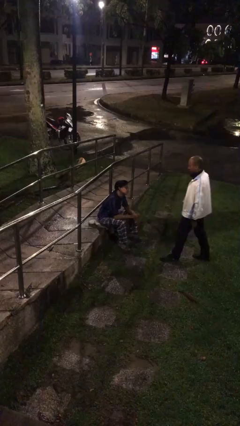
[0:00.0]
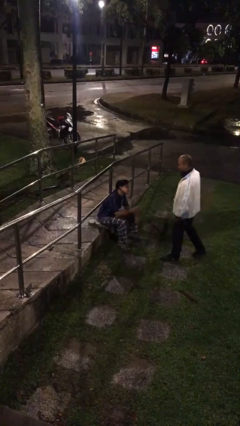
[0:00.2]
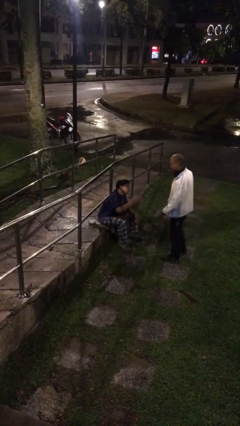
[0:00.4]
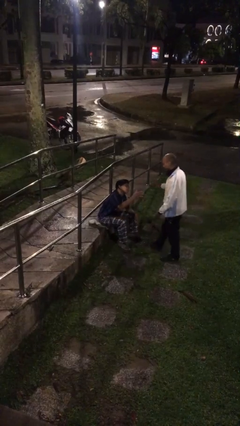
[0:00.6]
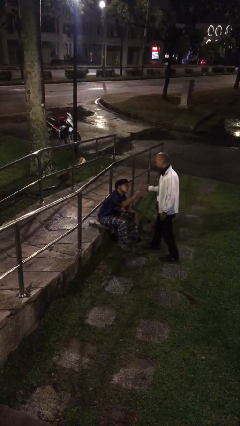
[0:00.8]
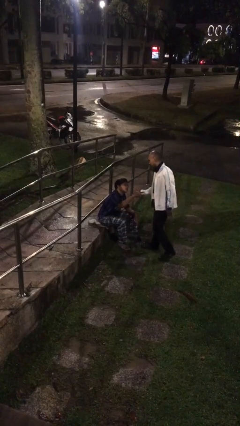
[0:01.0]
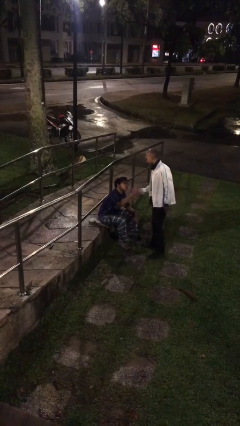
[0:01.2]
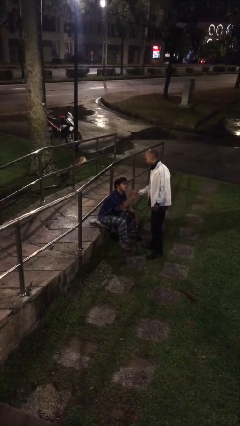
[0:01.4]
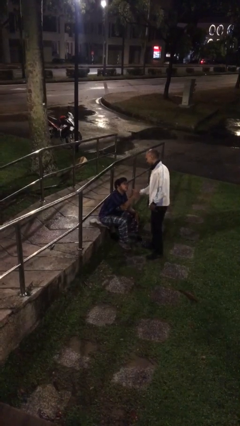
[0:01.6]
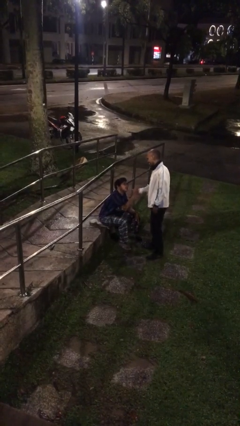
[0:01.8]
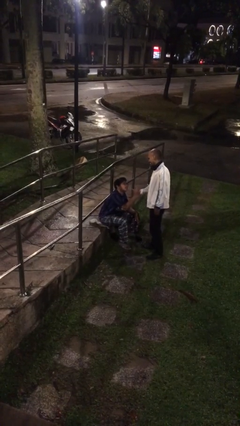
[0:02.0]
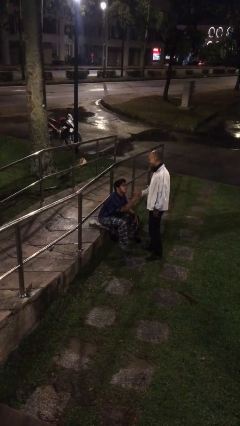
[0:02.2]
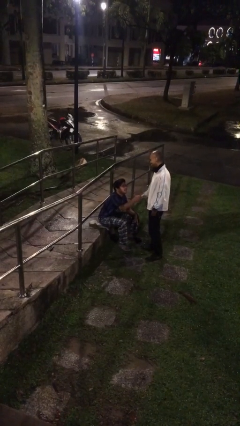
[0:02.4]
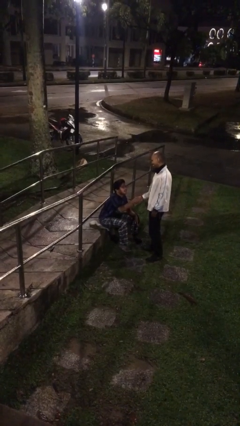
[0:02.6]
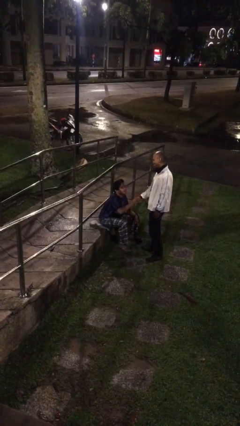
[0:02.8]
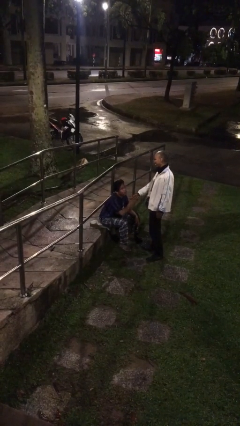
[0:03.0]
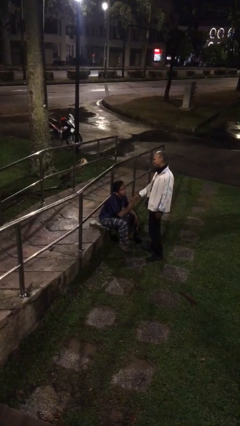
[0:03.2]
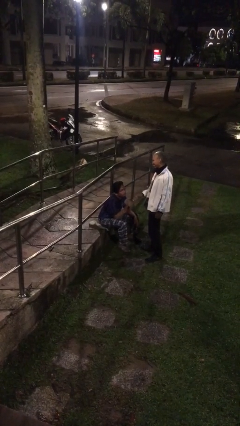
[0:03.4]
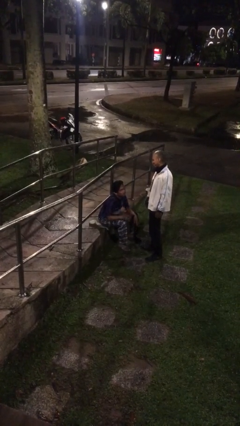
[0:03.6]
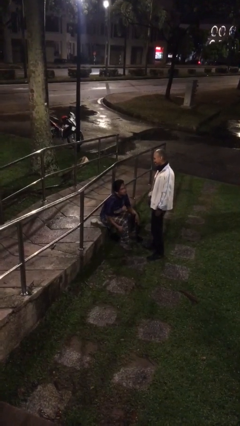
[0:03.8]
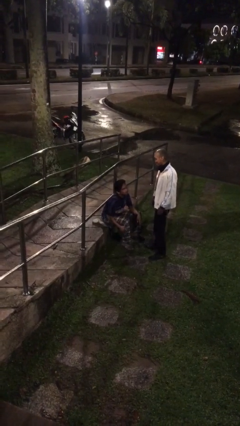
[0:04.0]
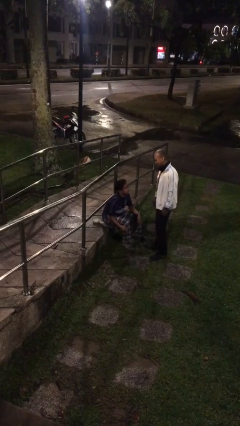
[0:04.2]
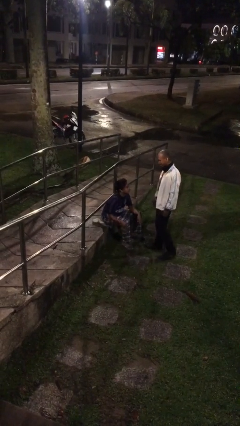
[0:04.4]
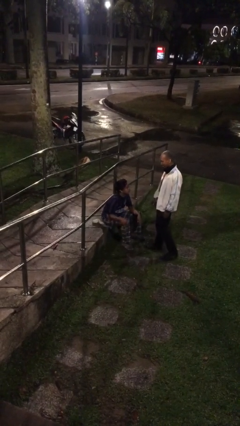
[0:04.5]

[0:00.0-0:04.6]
person shakes hand

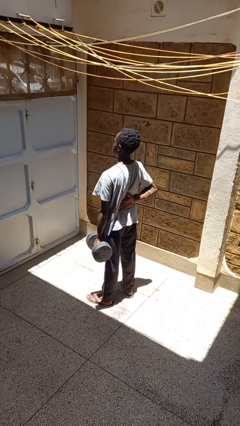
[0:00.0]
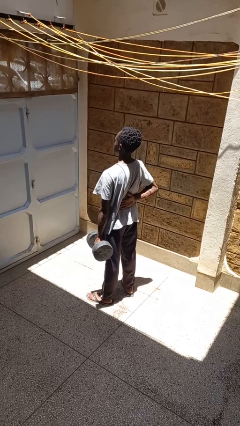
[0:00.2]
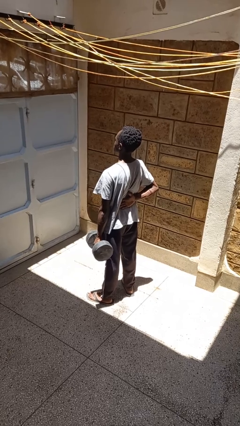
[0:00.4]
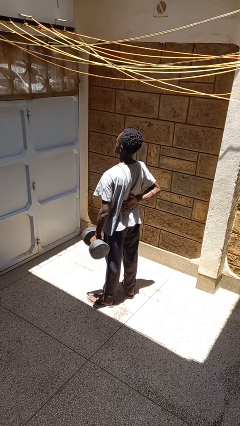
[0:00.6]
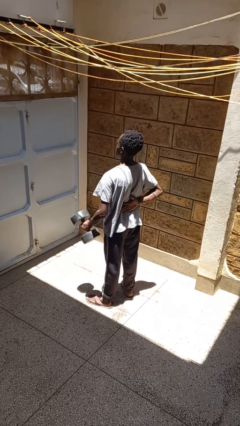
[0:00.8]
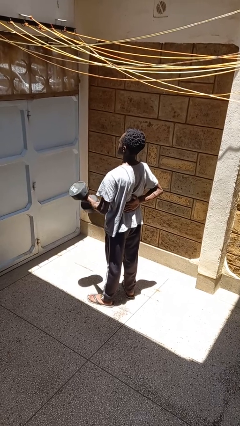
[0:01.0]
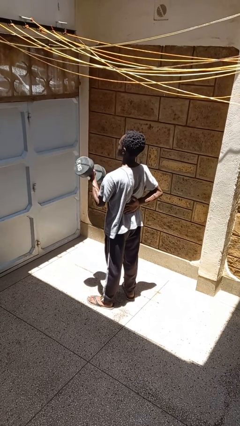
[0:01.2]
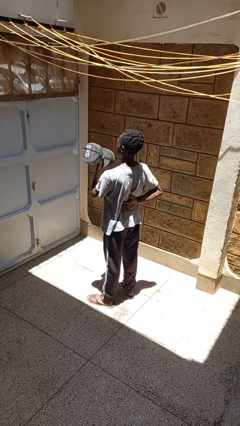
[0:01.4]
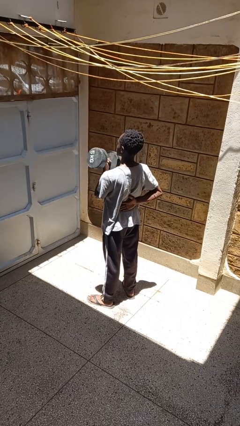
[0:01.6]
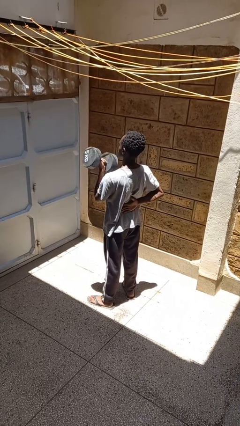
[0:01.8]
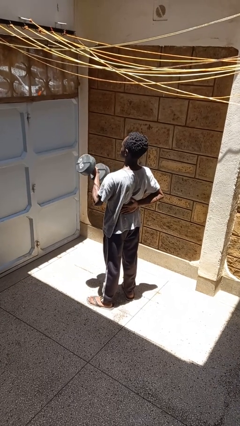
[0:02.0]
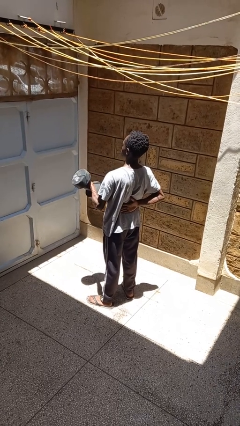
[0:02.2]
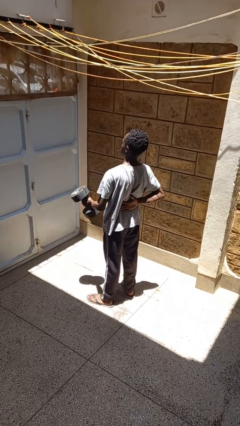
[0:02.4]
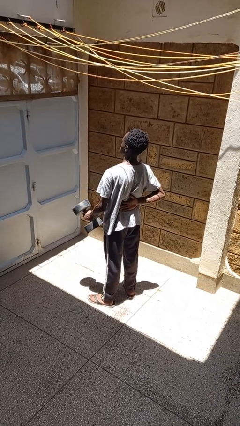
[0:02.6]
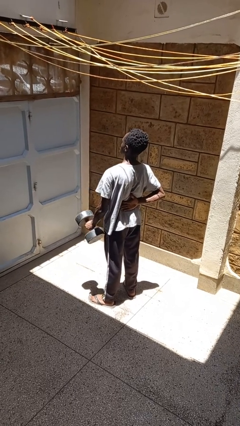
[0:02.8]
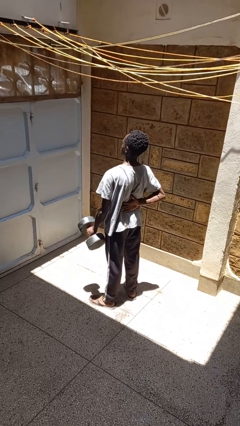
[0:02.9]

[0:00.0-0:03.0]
person lifts dumbbells

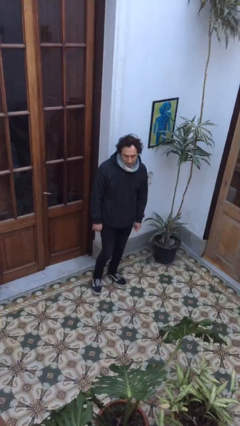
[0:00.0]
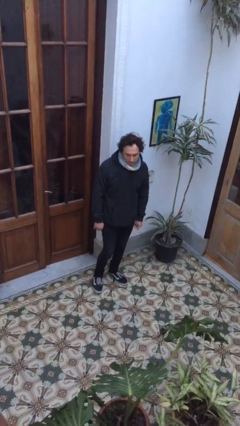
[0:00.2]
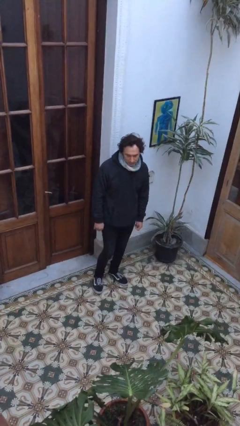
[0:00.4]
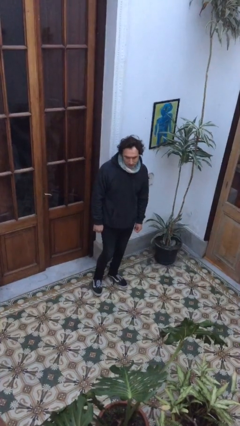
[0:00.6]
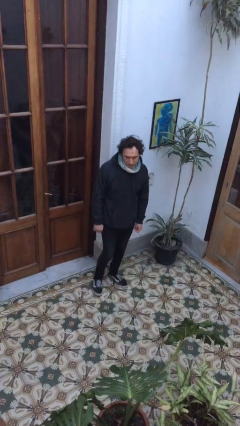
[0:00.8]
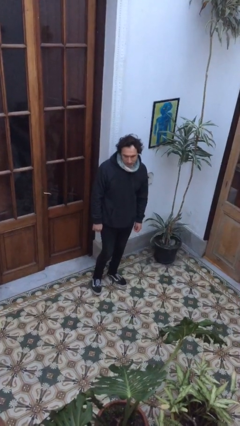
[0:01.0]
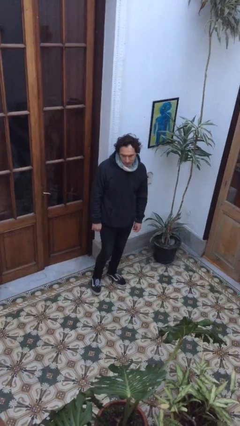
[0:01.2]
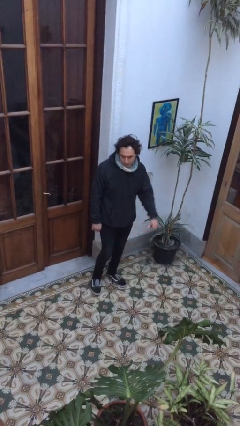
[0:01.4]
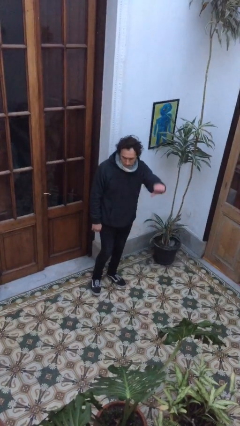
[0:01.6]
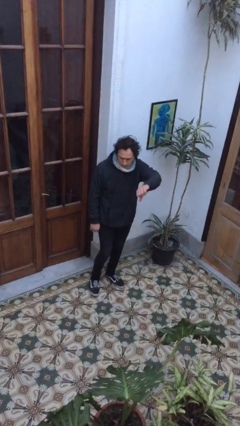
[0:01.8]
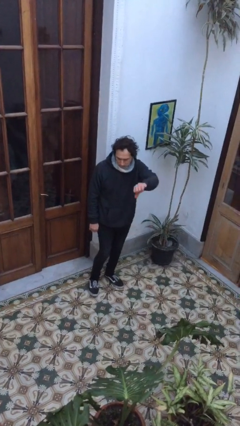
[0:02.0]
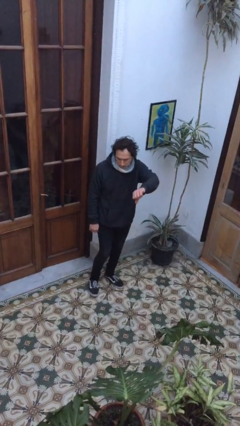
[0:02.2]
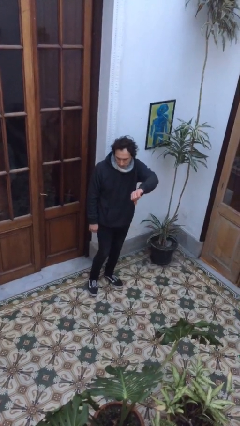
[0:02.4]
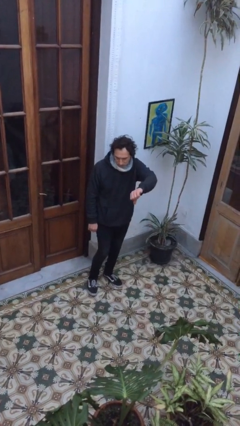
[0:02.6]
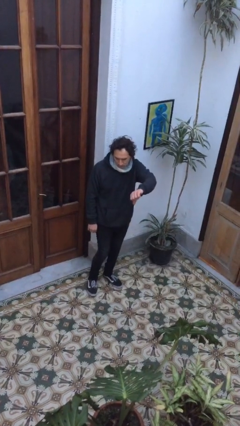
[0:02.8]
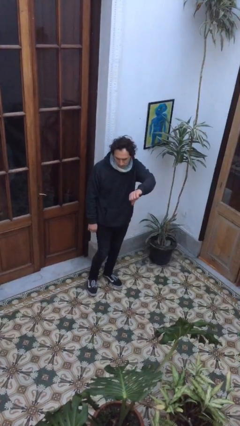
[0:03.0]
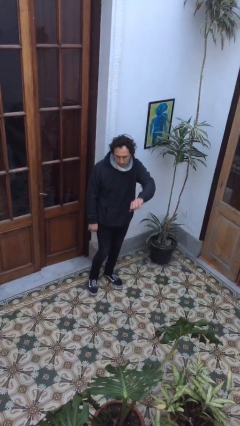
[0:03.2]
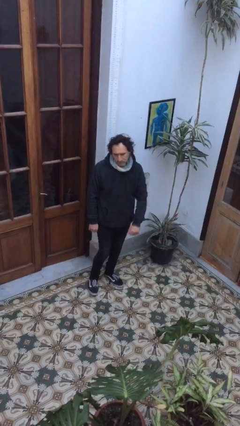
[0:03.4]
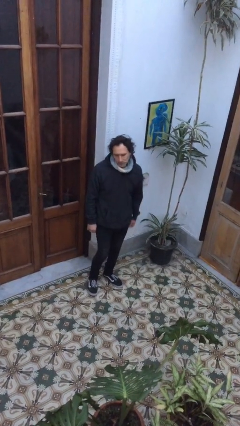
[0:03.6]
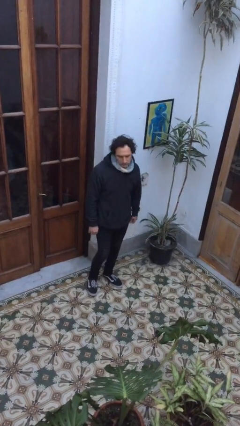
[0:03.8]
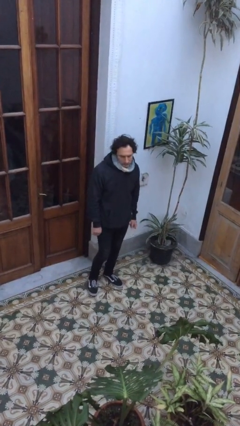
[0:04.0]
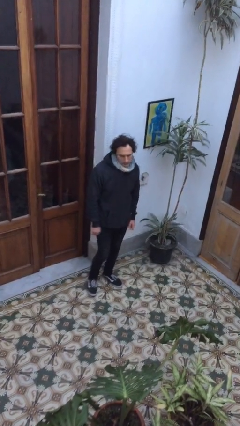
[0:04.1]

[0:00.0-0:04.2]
person gestures thumbs down

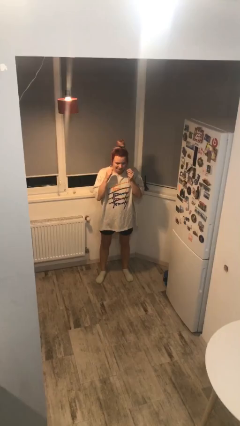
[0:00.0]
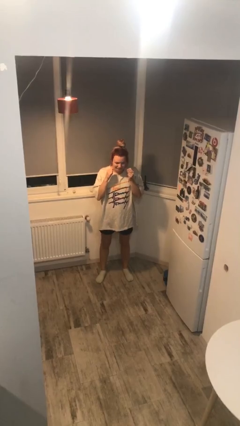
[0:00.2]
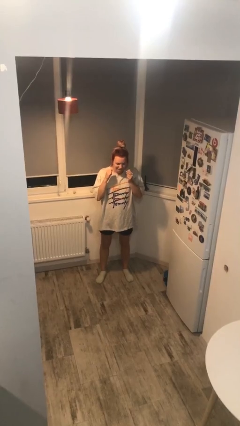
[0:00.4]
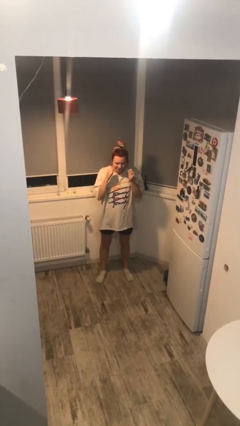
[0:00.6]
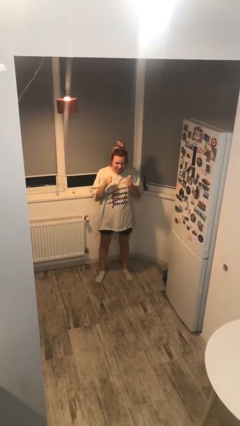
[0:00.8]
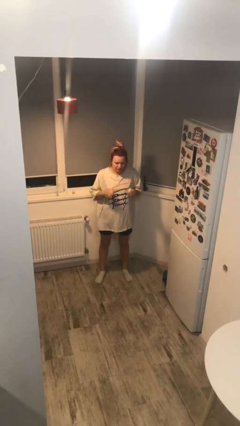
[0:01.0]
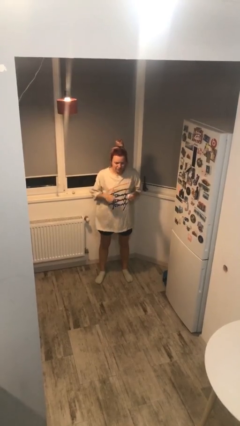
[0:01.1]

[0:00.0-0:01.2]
person flosses

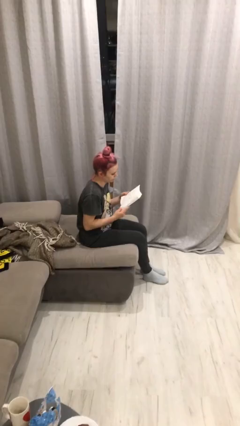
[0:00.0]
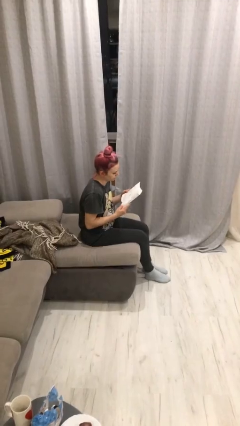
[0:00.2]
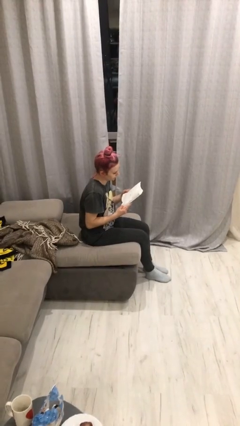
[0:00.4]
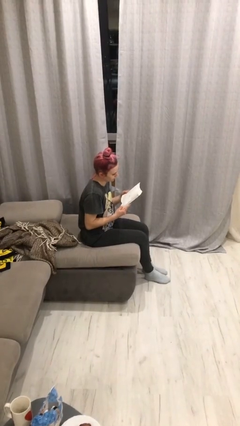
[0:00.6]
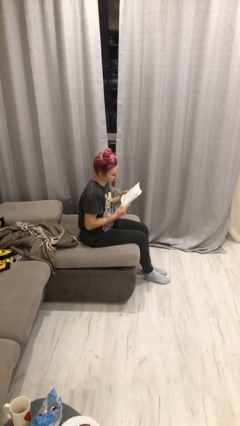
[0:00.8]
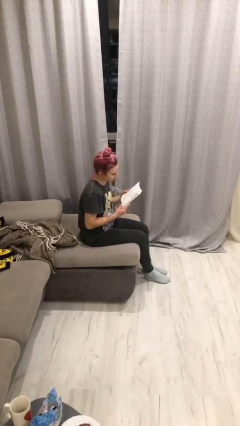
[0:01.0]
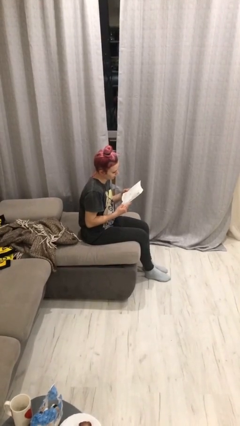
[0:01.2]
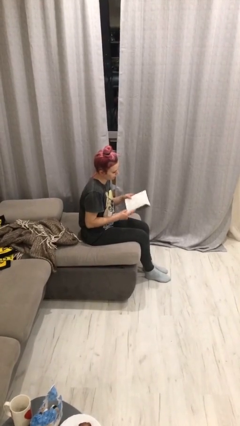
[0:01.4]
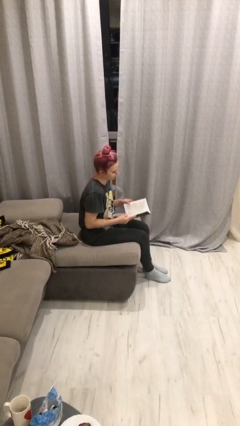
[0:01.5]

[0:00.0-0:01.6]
person reads document

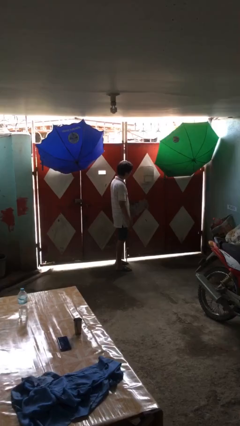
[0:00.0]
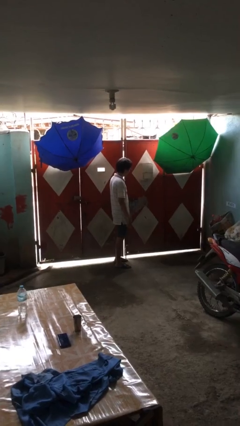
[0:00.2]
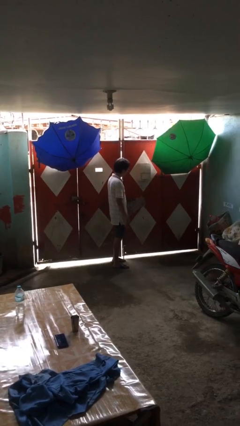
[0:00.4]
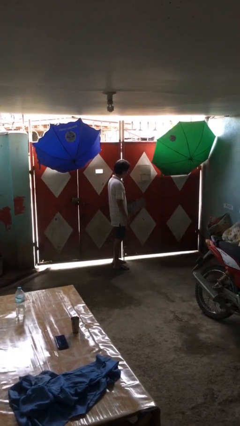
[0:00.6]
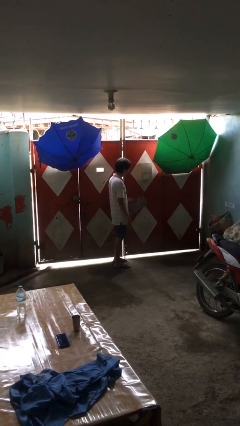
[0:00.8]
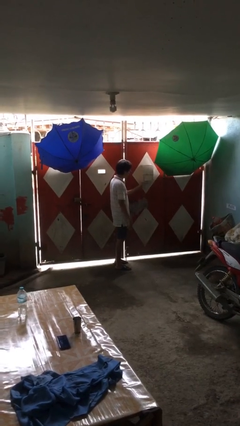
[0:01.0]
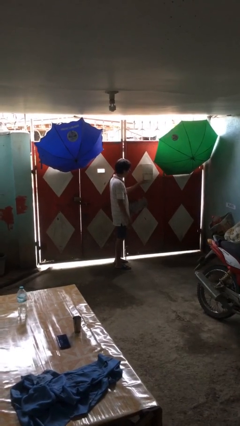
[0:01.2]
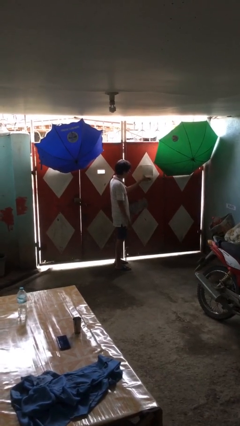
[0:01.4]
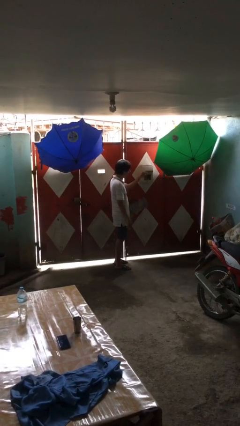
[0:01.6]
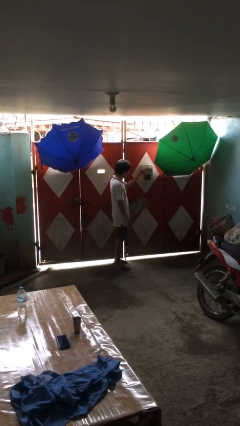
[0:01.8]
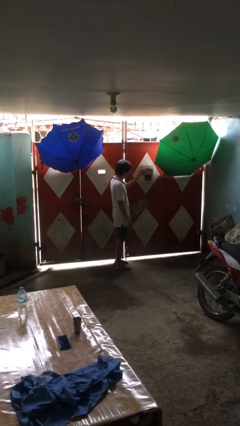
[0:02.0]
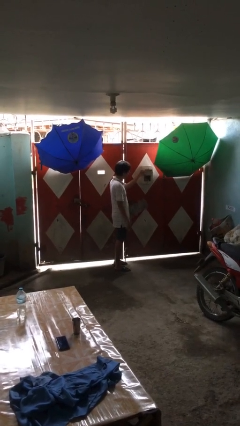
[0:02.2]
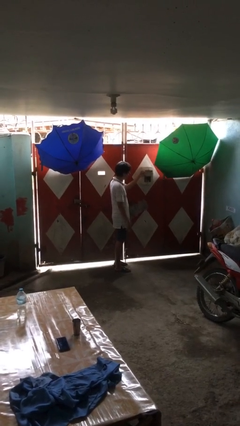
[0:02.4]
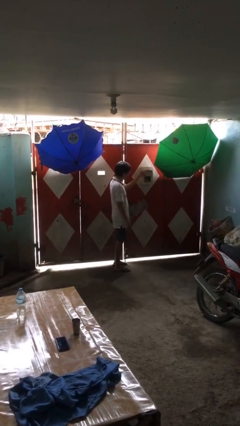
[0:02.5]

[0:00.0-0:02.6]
person opens mailbox

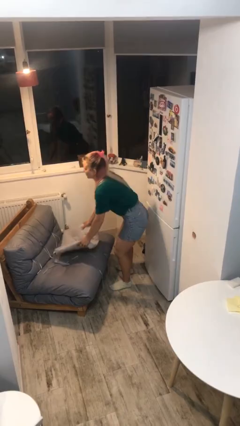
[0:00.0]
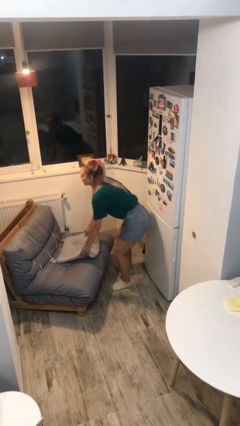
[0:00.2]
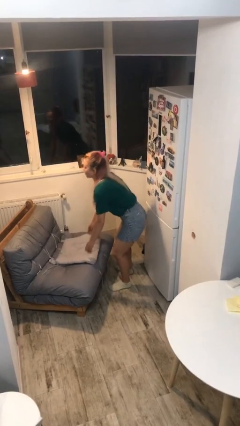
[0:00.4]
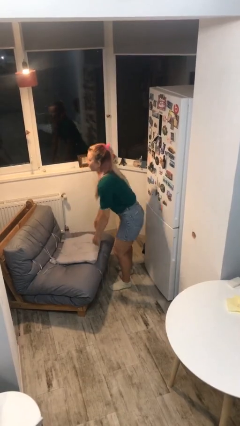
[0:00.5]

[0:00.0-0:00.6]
person puts down object on couch
